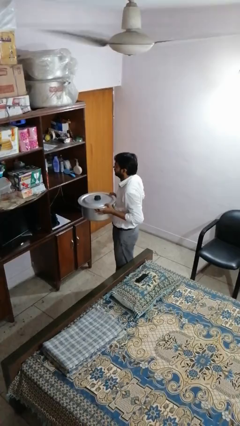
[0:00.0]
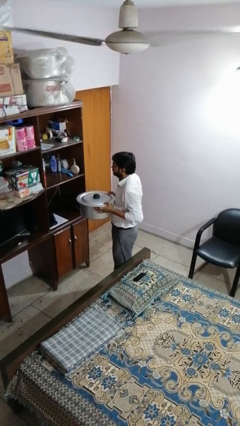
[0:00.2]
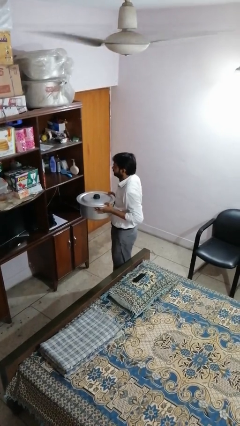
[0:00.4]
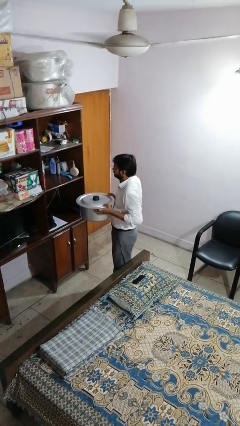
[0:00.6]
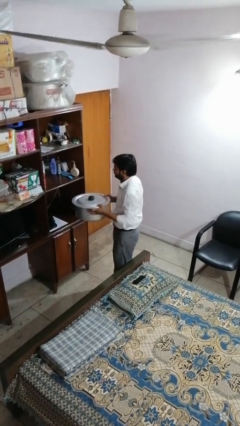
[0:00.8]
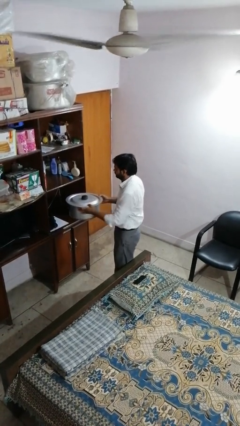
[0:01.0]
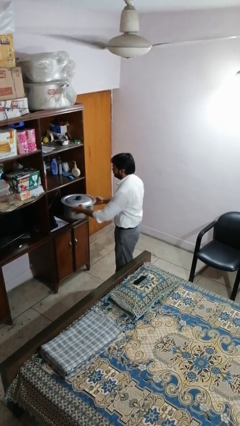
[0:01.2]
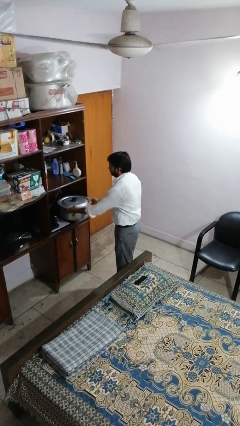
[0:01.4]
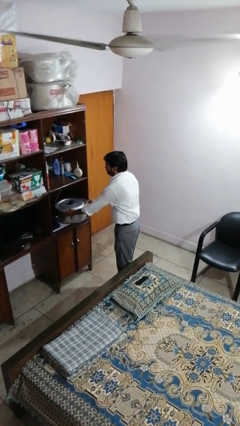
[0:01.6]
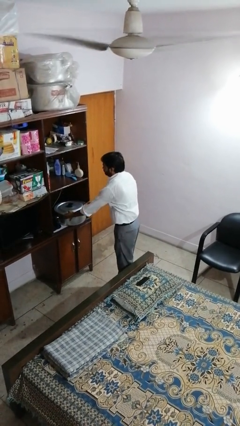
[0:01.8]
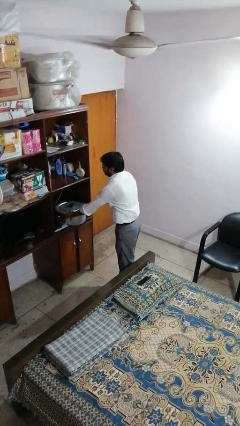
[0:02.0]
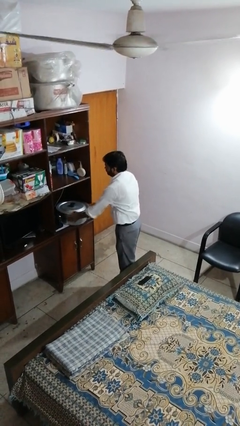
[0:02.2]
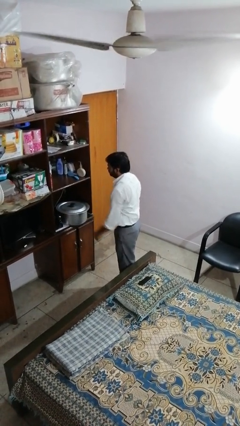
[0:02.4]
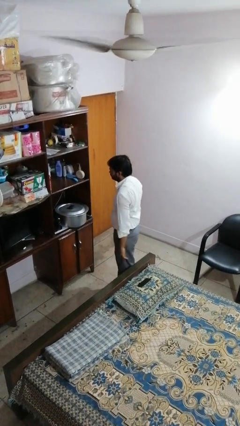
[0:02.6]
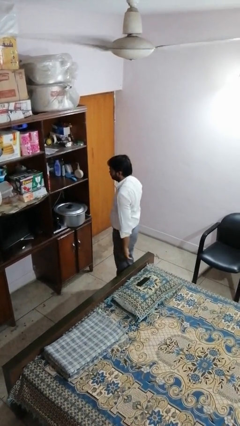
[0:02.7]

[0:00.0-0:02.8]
person puts down object on shelf

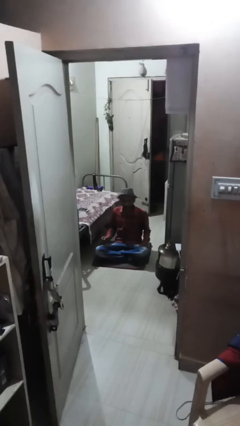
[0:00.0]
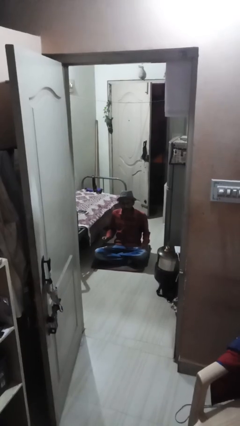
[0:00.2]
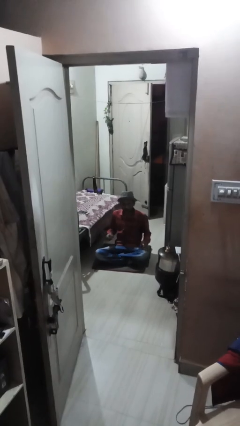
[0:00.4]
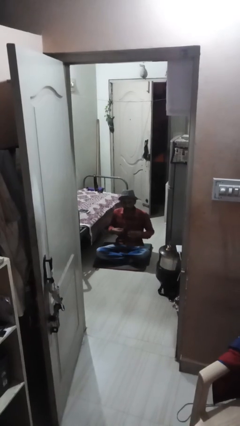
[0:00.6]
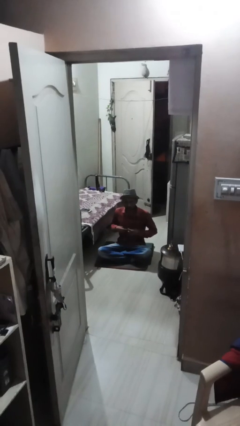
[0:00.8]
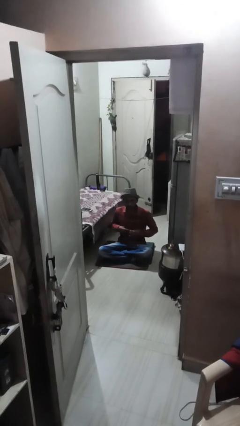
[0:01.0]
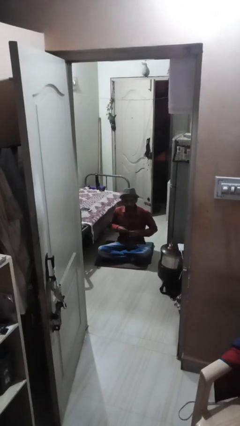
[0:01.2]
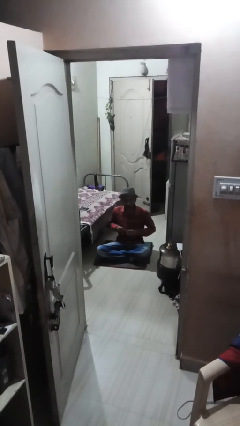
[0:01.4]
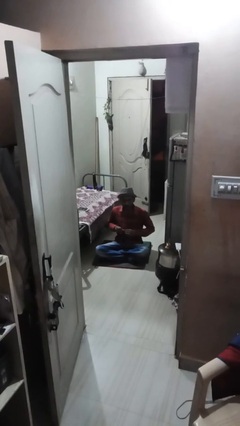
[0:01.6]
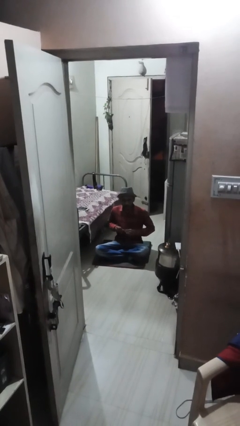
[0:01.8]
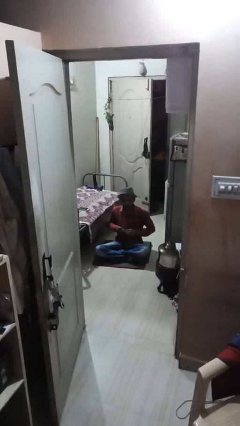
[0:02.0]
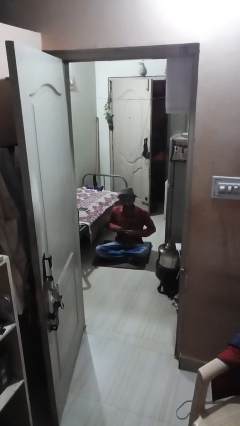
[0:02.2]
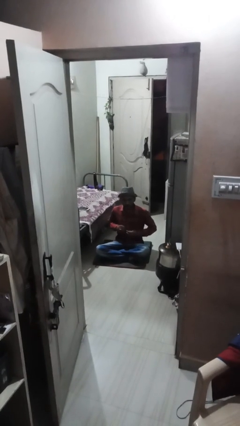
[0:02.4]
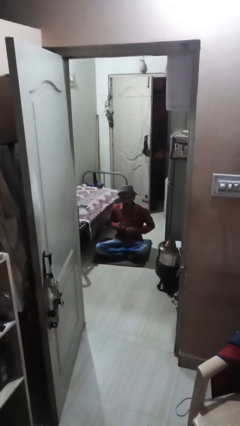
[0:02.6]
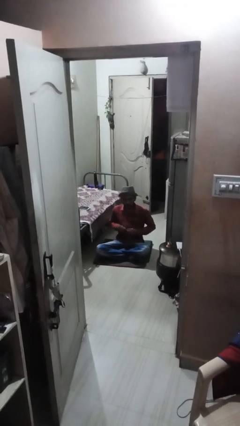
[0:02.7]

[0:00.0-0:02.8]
person buttons shirt

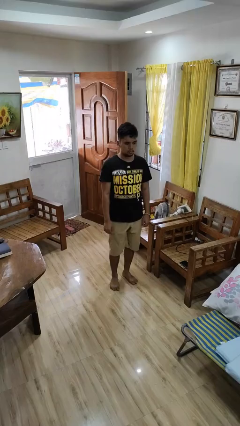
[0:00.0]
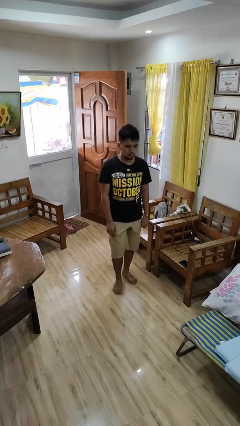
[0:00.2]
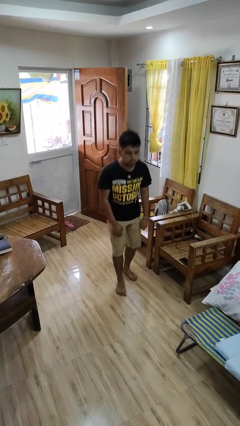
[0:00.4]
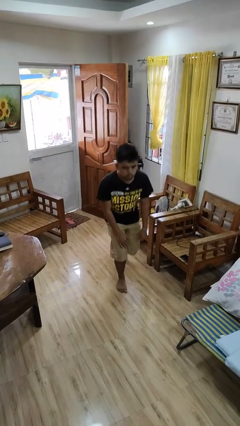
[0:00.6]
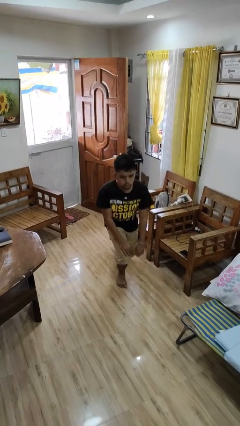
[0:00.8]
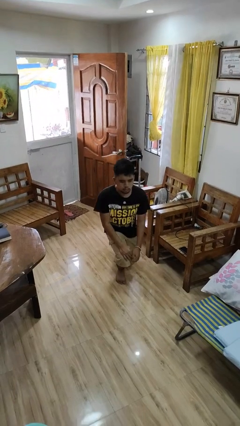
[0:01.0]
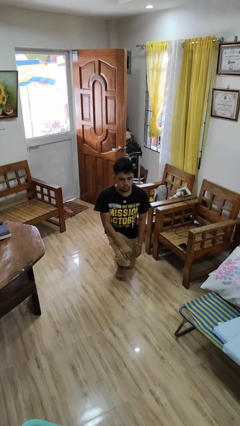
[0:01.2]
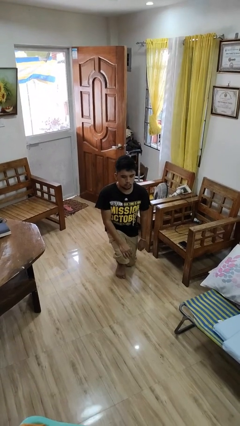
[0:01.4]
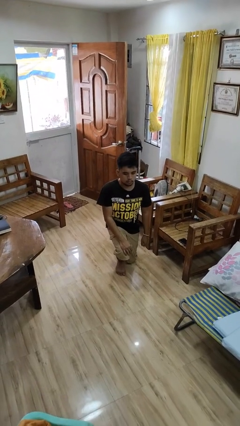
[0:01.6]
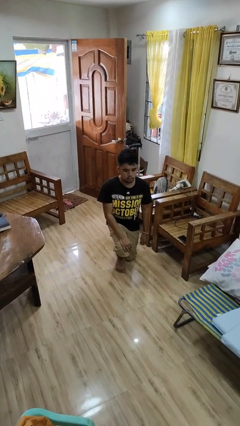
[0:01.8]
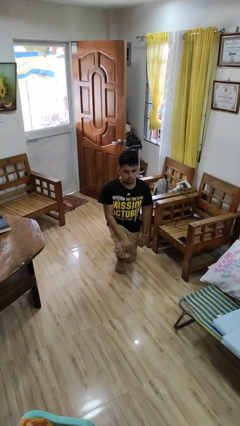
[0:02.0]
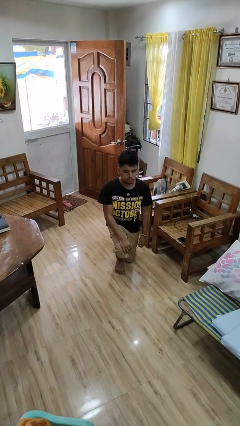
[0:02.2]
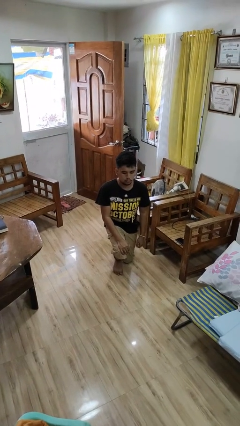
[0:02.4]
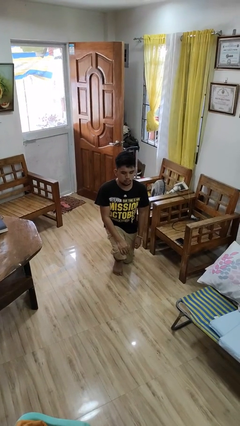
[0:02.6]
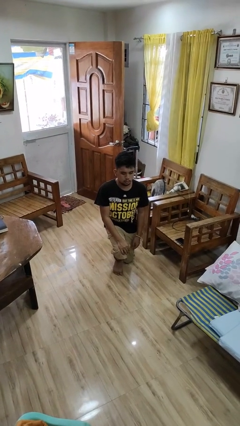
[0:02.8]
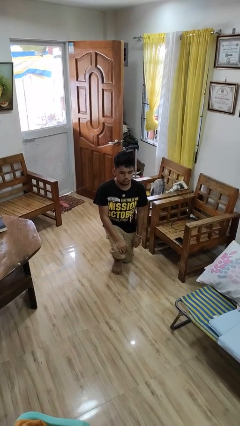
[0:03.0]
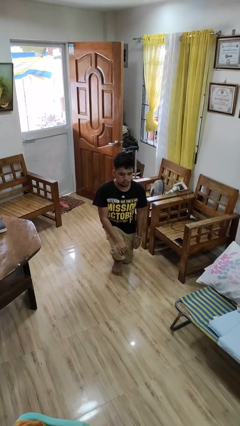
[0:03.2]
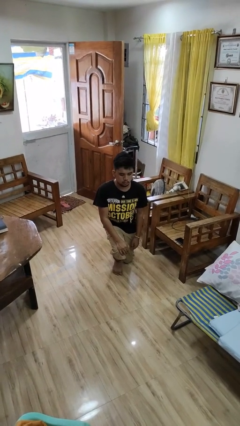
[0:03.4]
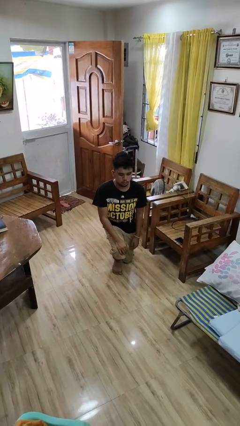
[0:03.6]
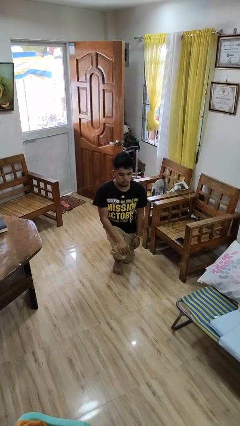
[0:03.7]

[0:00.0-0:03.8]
person kneels

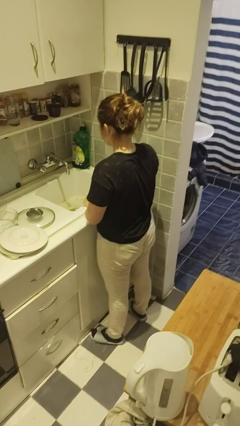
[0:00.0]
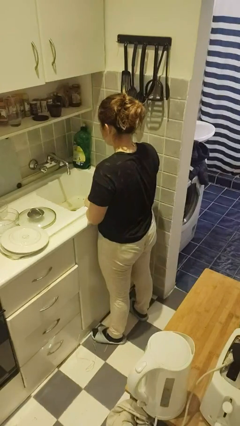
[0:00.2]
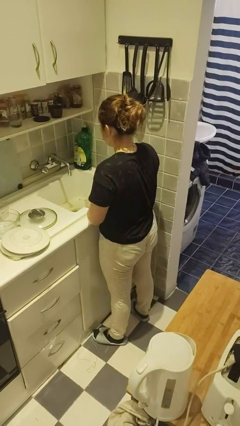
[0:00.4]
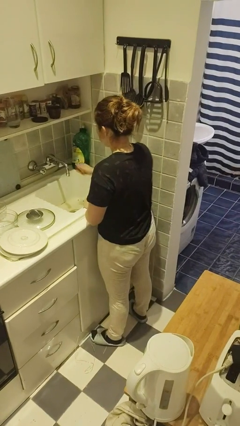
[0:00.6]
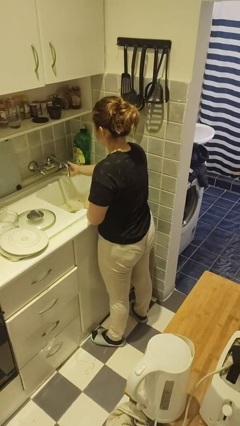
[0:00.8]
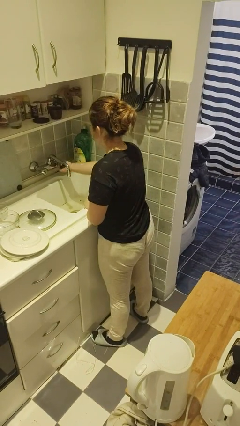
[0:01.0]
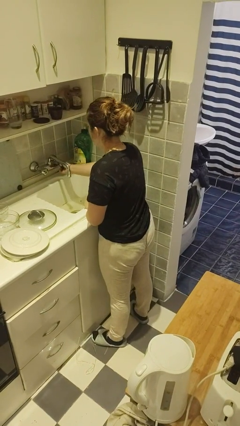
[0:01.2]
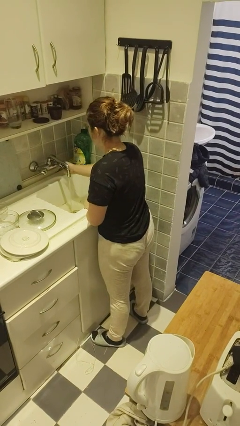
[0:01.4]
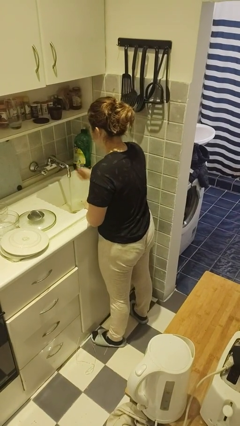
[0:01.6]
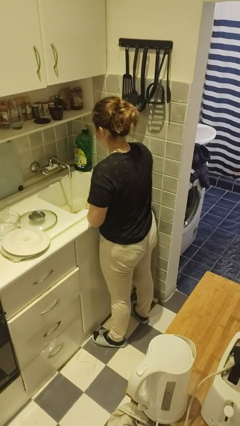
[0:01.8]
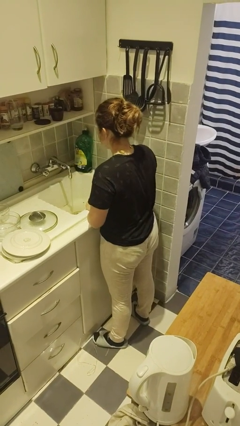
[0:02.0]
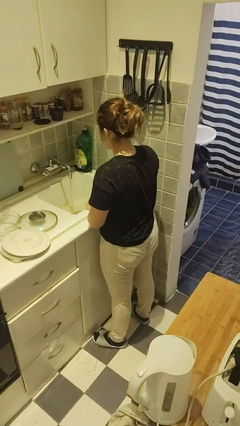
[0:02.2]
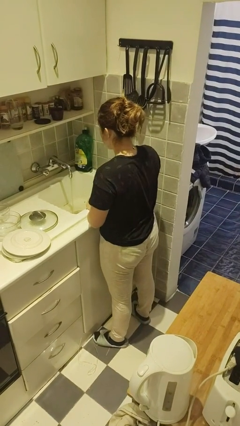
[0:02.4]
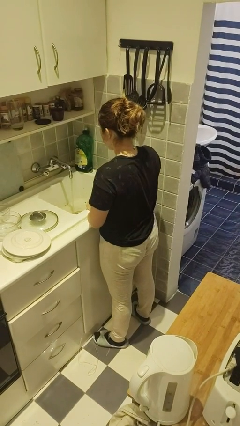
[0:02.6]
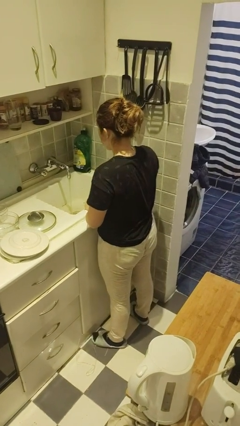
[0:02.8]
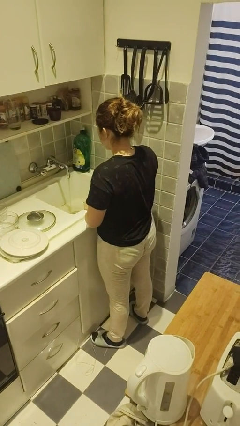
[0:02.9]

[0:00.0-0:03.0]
person turns on faucet

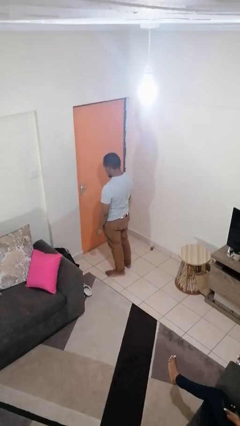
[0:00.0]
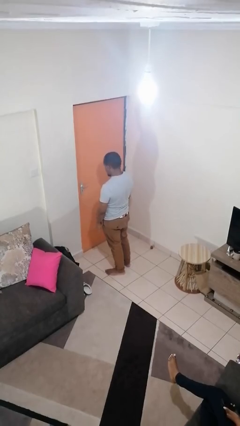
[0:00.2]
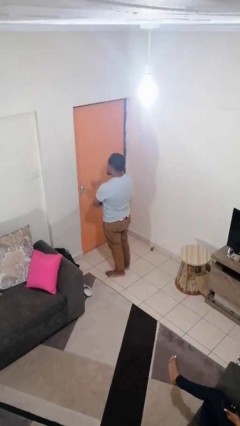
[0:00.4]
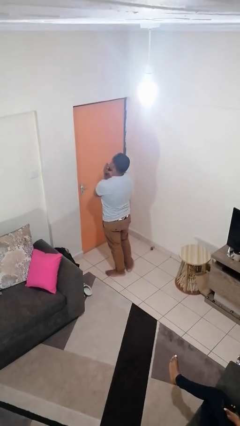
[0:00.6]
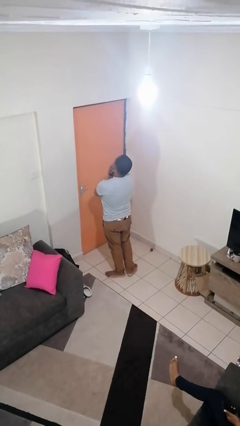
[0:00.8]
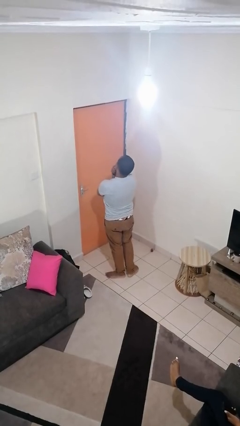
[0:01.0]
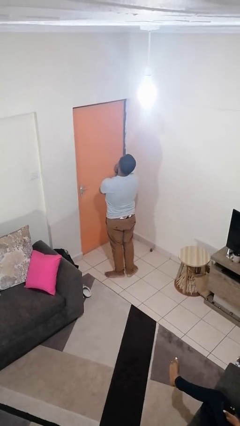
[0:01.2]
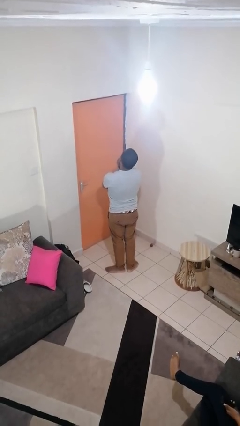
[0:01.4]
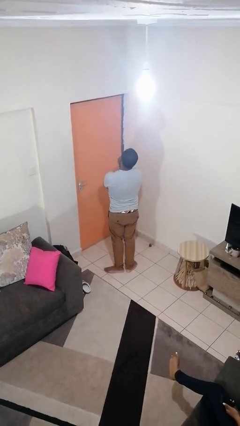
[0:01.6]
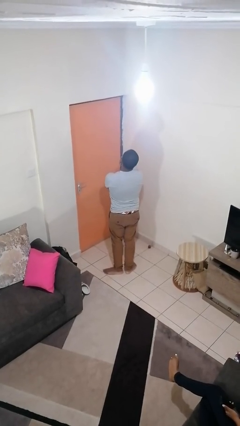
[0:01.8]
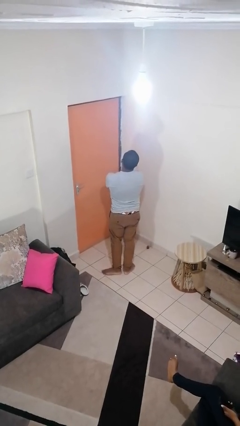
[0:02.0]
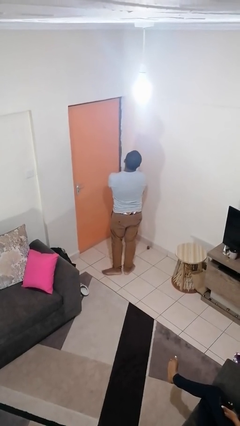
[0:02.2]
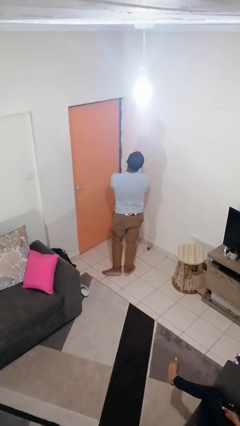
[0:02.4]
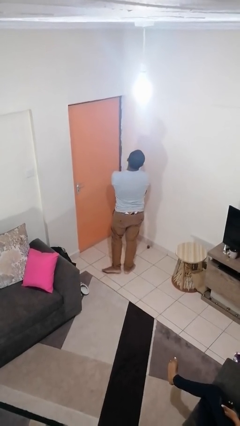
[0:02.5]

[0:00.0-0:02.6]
person strokes chin

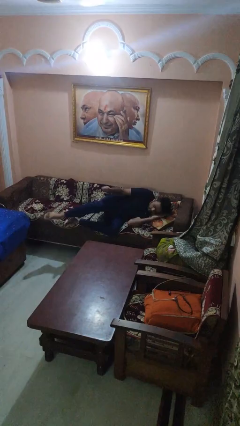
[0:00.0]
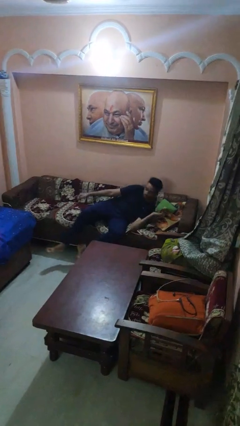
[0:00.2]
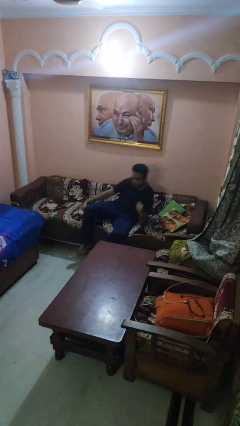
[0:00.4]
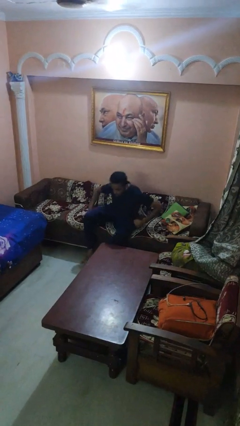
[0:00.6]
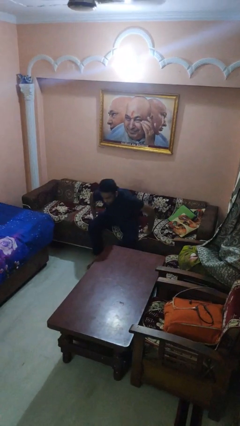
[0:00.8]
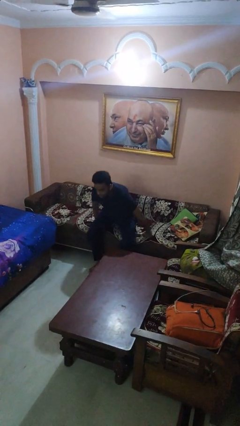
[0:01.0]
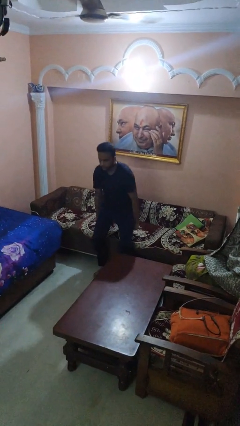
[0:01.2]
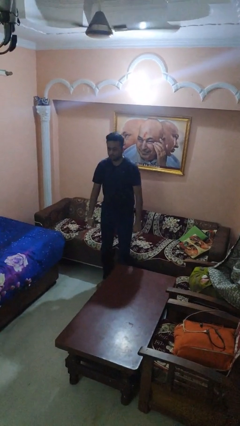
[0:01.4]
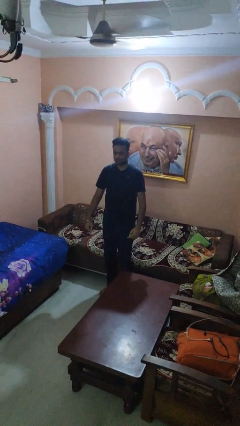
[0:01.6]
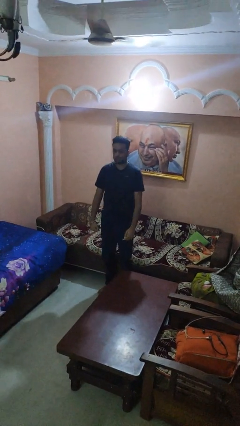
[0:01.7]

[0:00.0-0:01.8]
person stands up

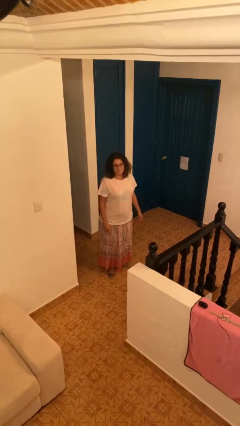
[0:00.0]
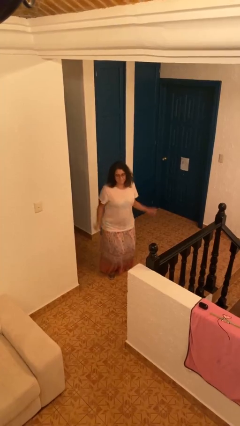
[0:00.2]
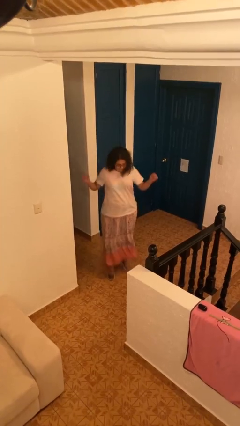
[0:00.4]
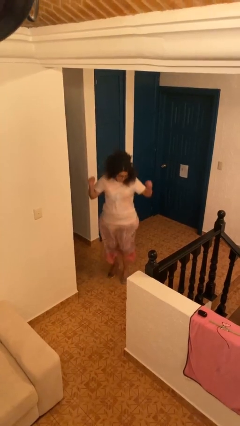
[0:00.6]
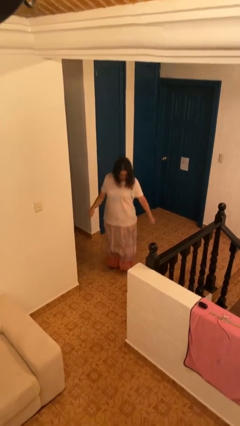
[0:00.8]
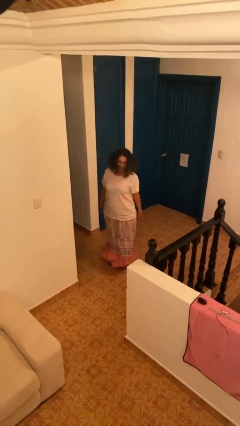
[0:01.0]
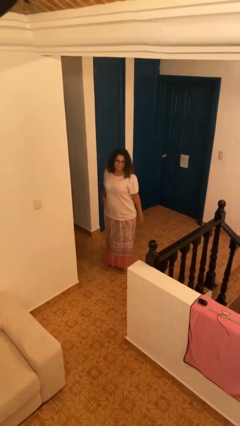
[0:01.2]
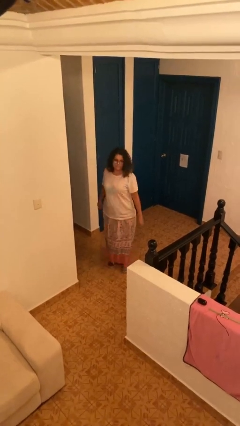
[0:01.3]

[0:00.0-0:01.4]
person jumps
